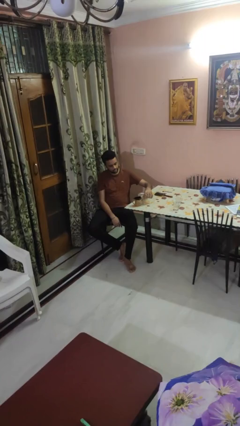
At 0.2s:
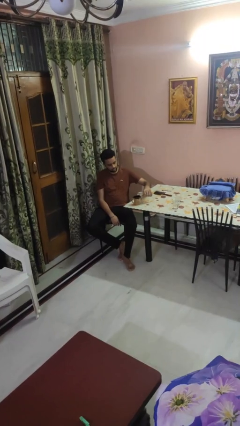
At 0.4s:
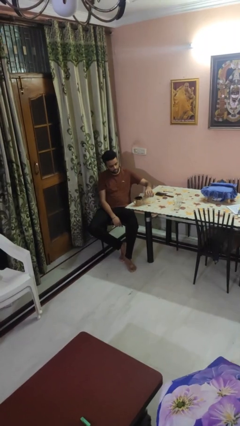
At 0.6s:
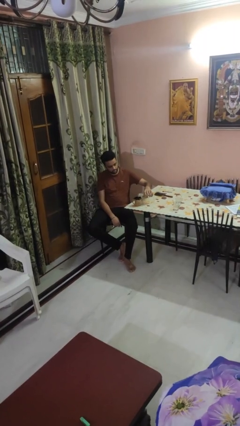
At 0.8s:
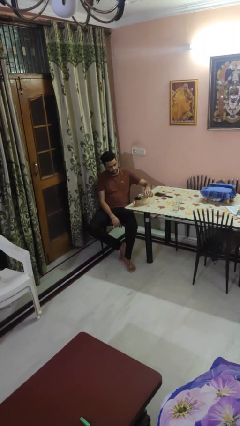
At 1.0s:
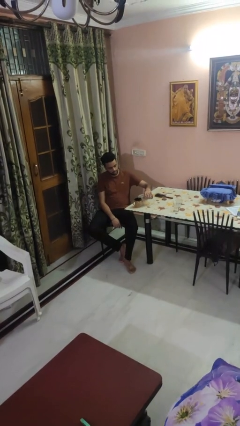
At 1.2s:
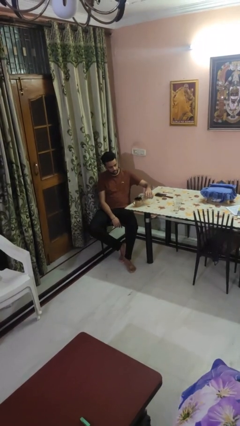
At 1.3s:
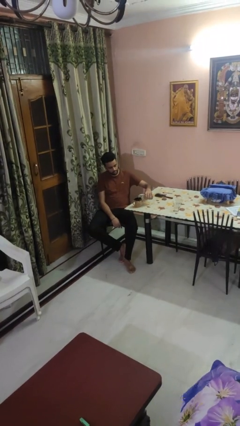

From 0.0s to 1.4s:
person pours liquid into cup

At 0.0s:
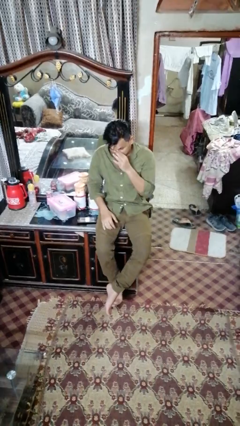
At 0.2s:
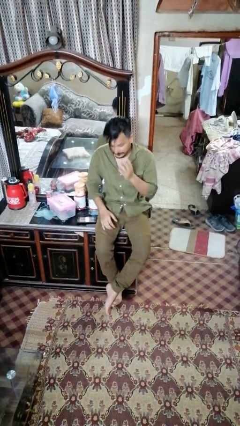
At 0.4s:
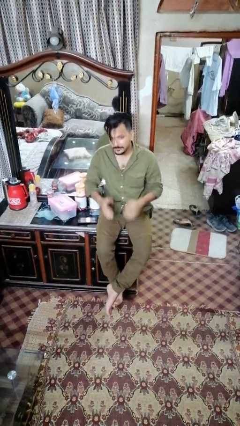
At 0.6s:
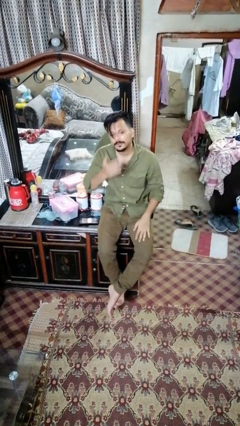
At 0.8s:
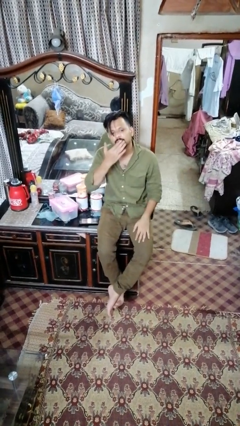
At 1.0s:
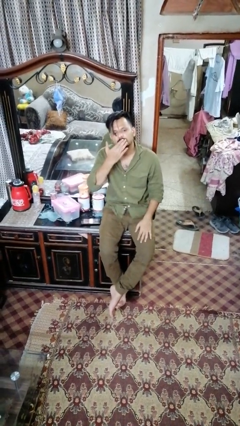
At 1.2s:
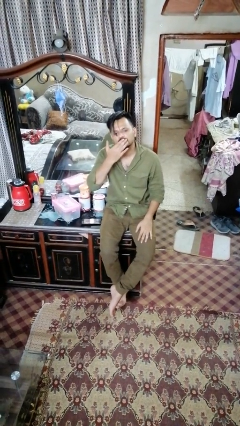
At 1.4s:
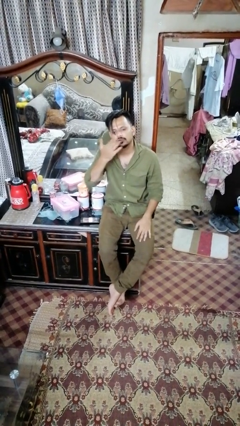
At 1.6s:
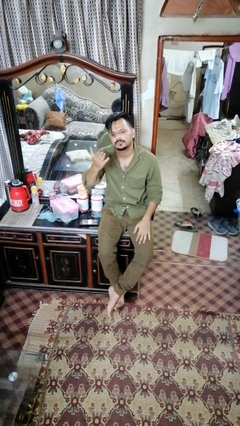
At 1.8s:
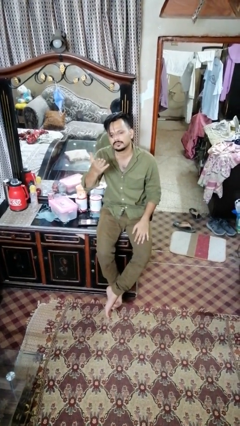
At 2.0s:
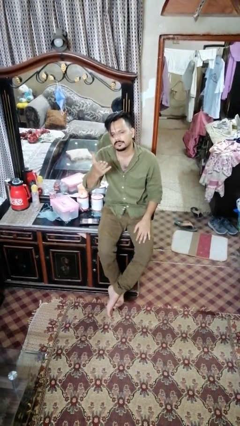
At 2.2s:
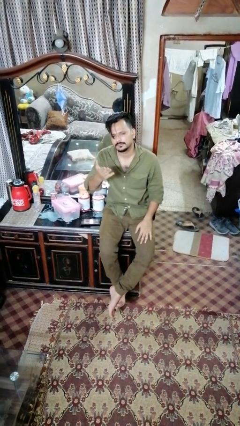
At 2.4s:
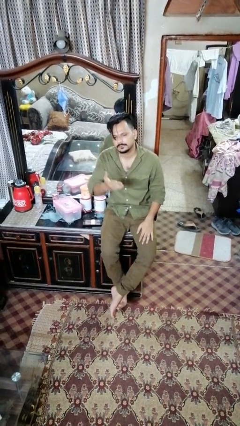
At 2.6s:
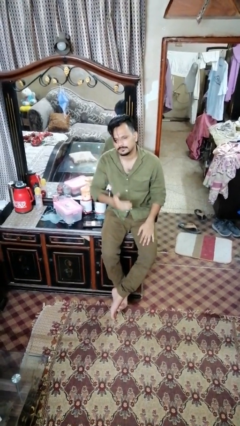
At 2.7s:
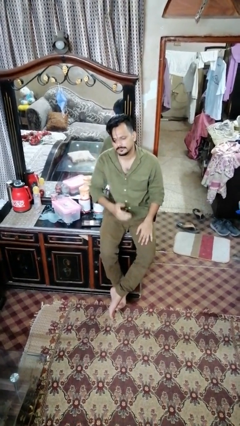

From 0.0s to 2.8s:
person gestures blow kiss

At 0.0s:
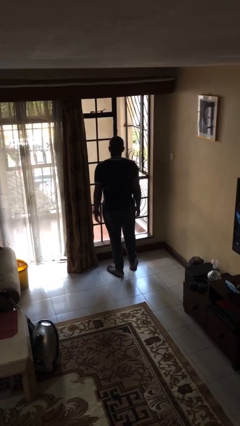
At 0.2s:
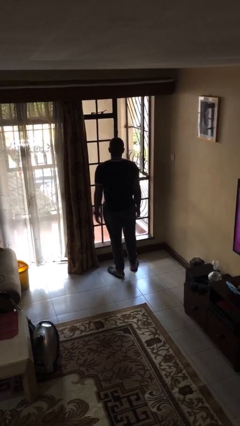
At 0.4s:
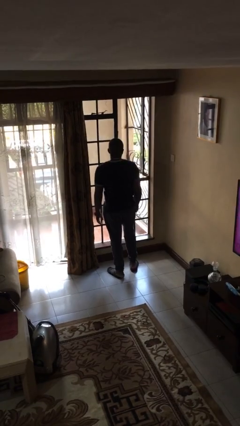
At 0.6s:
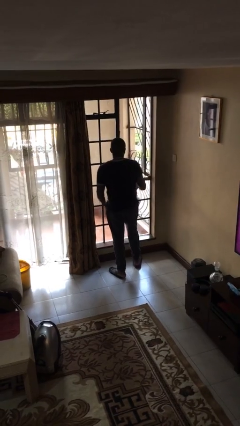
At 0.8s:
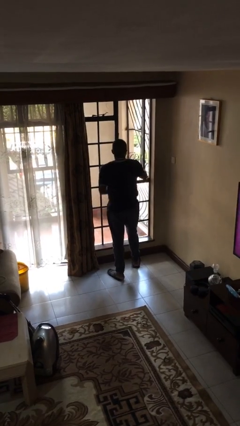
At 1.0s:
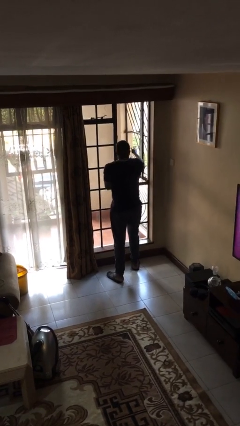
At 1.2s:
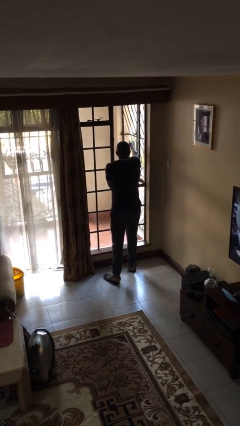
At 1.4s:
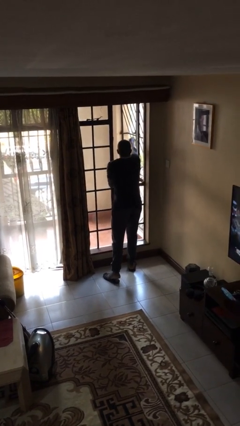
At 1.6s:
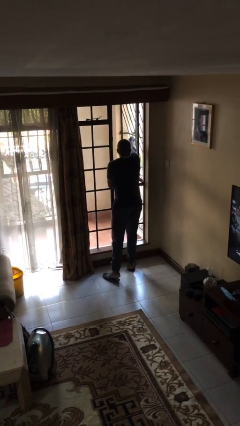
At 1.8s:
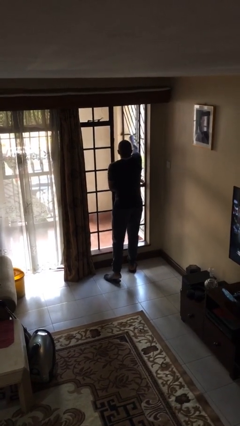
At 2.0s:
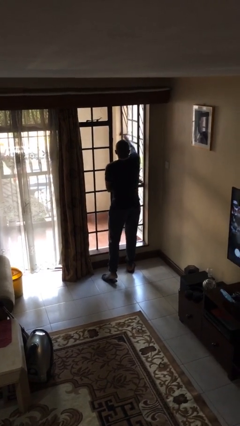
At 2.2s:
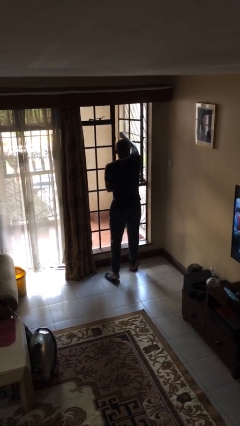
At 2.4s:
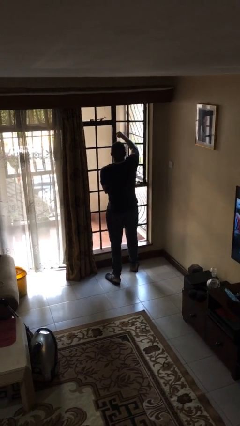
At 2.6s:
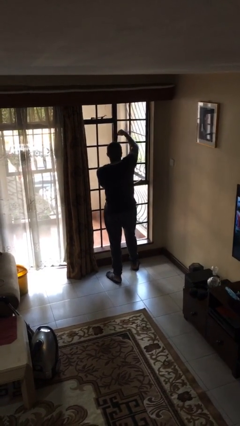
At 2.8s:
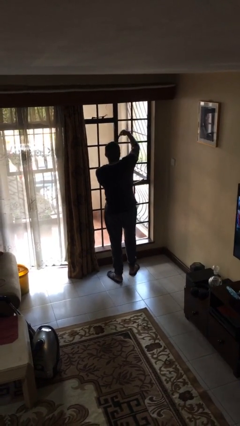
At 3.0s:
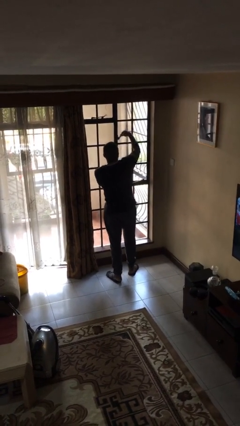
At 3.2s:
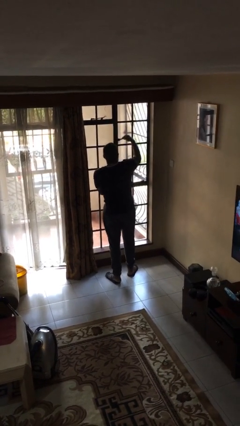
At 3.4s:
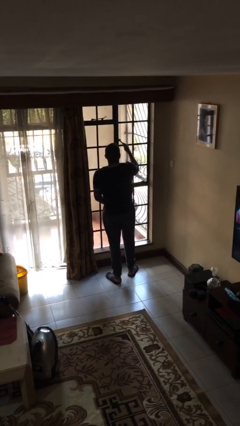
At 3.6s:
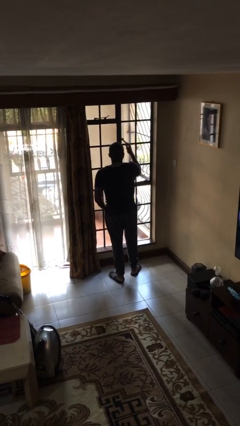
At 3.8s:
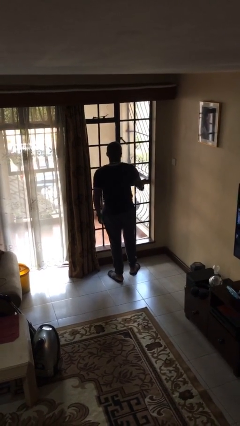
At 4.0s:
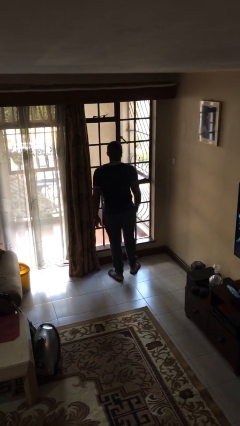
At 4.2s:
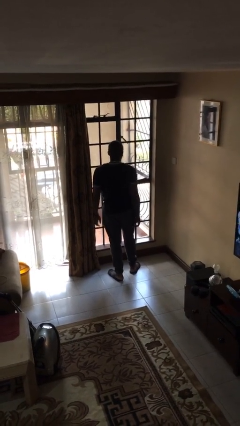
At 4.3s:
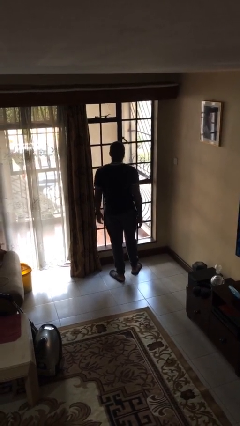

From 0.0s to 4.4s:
person closes home window

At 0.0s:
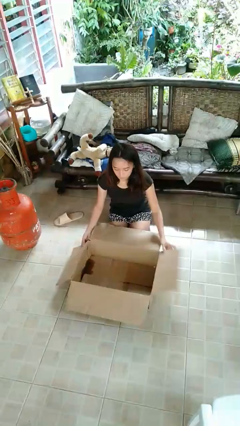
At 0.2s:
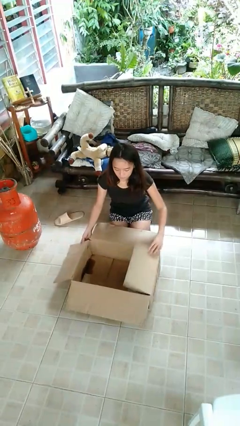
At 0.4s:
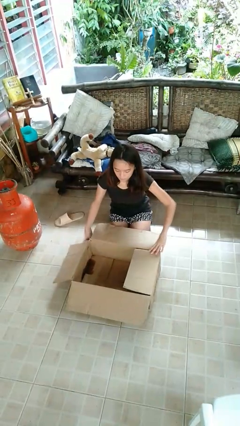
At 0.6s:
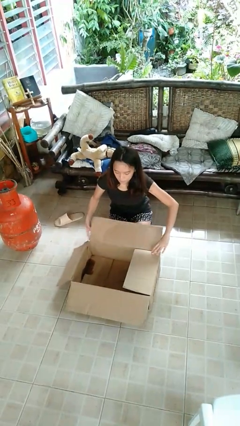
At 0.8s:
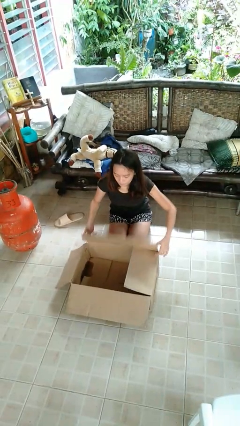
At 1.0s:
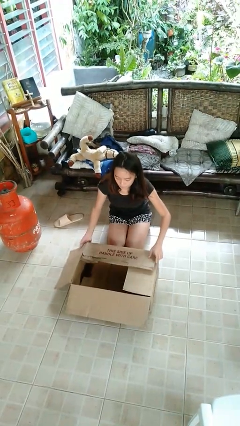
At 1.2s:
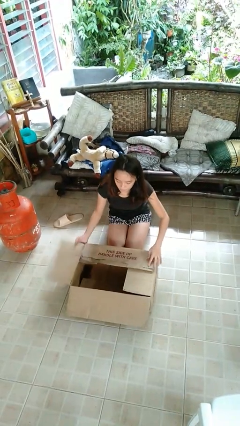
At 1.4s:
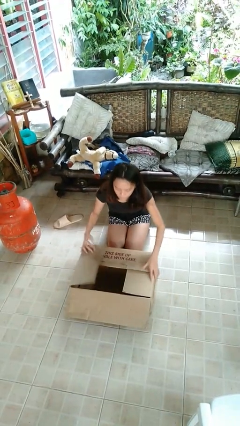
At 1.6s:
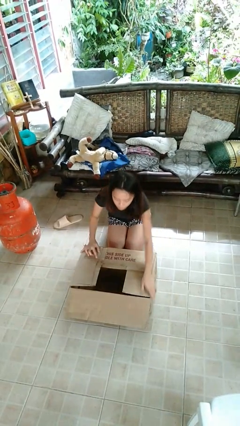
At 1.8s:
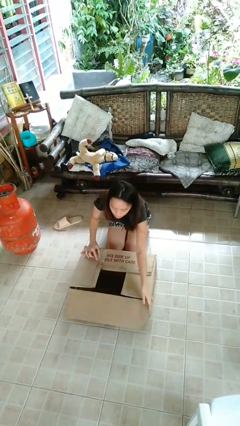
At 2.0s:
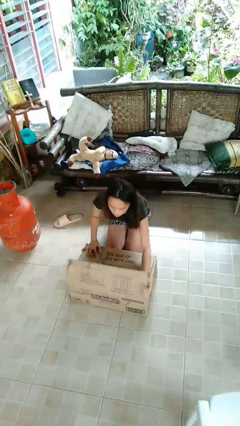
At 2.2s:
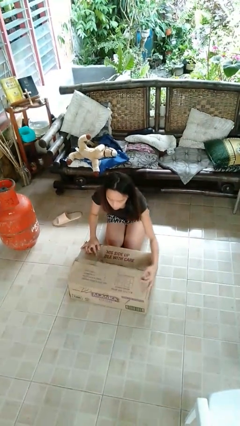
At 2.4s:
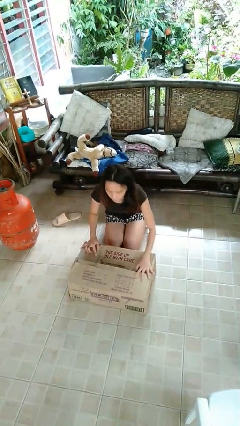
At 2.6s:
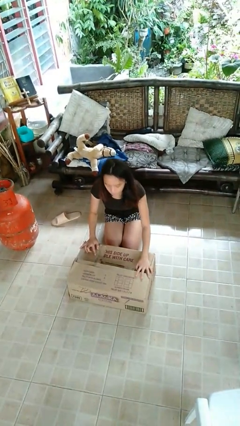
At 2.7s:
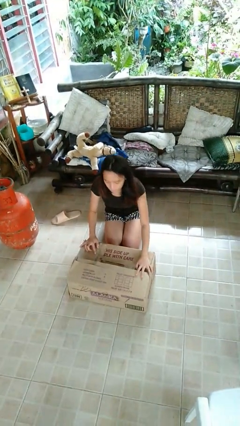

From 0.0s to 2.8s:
person closes box

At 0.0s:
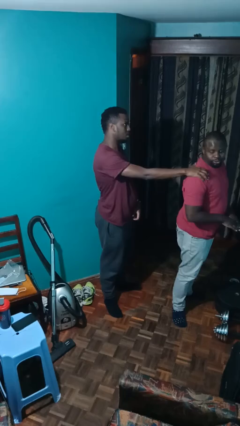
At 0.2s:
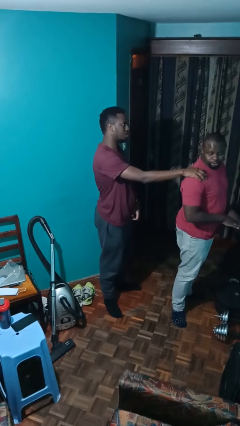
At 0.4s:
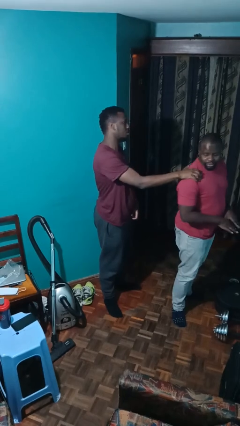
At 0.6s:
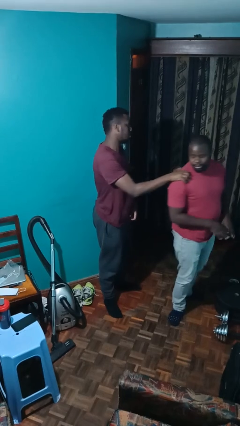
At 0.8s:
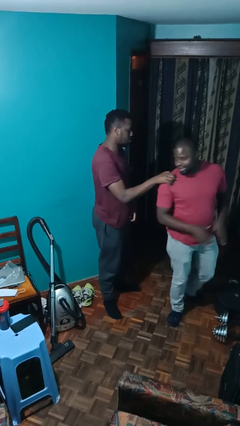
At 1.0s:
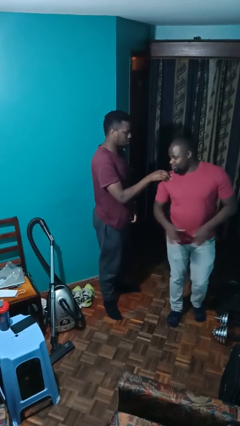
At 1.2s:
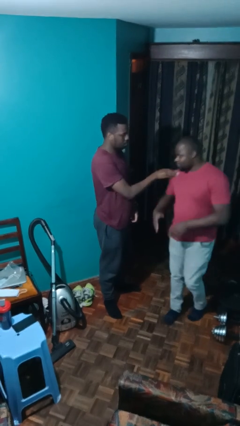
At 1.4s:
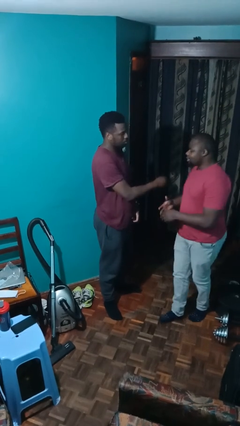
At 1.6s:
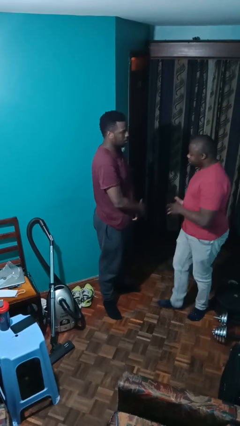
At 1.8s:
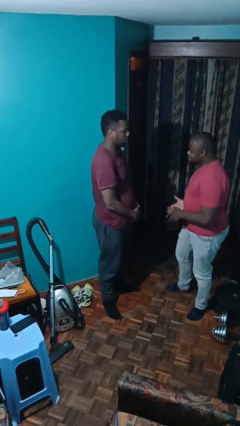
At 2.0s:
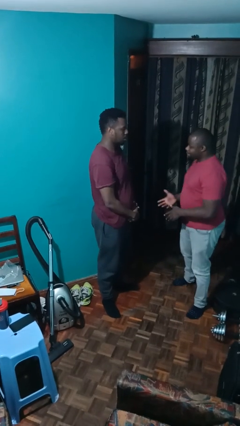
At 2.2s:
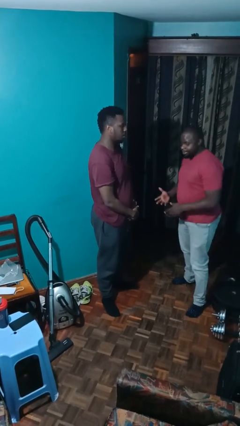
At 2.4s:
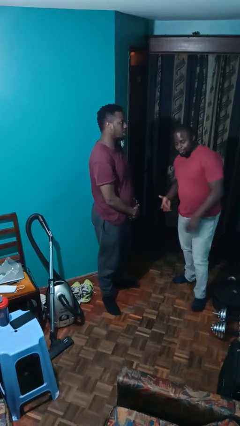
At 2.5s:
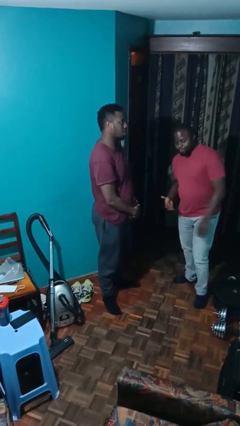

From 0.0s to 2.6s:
person spins person around

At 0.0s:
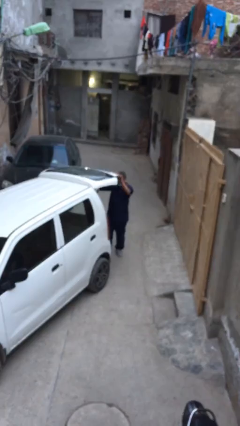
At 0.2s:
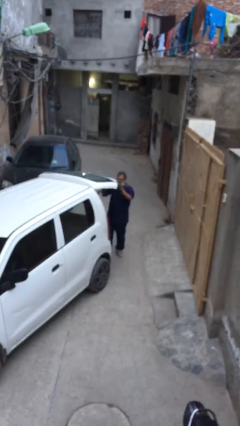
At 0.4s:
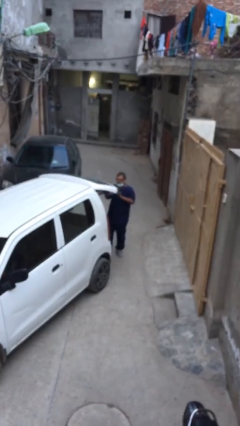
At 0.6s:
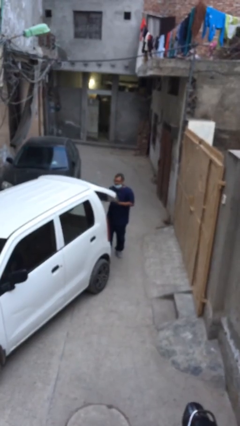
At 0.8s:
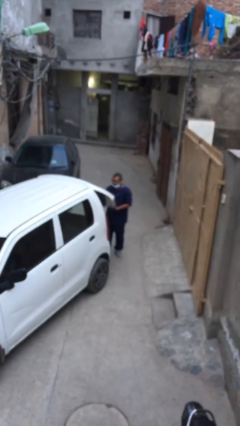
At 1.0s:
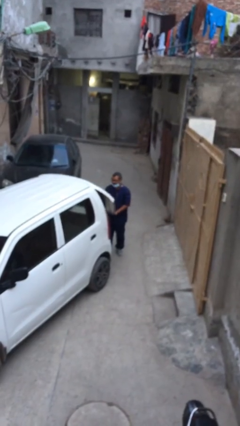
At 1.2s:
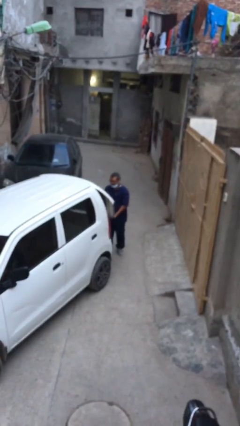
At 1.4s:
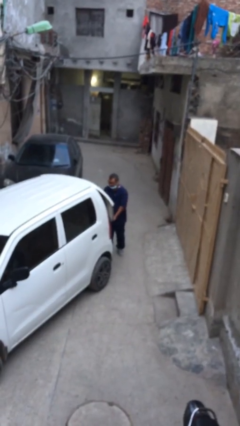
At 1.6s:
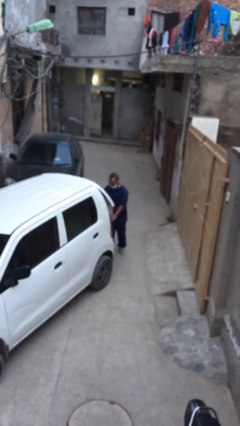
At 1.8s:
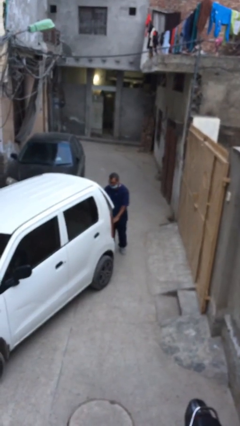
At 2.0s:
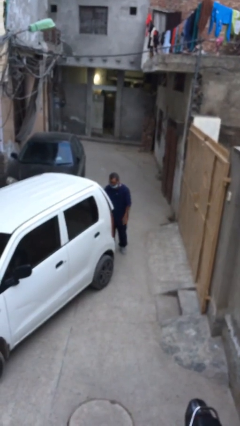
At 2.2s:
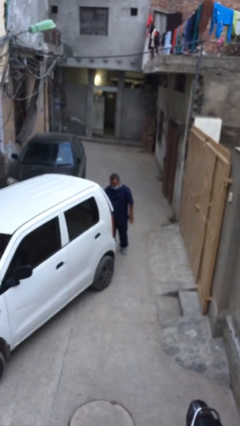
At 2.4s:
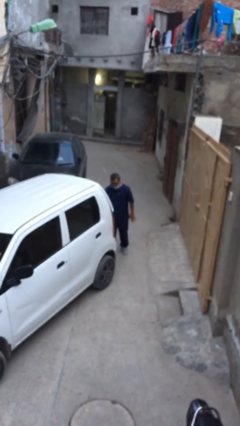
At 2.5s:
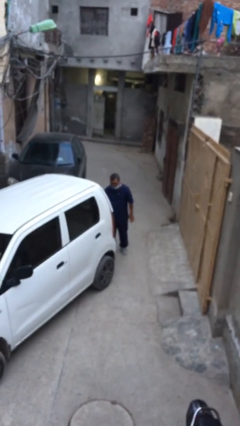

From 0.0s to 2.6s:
person closes car trunk

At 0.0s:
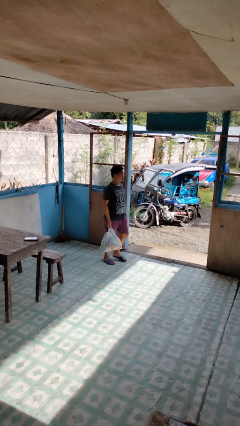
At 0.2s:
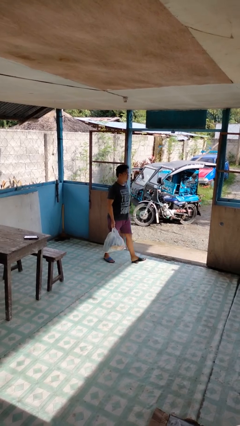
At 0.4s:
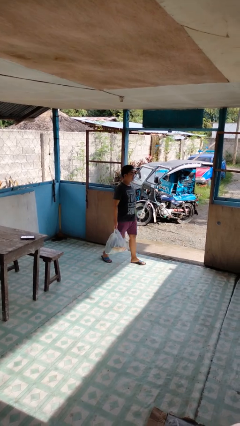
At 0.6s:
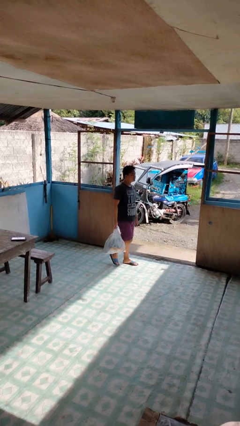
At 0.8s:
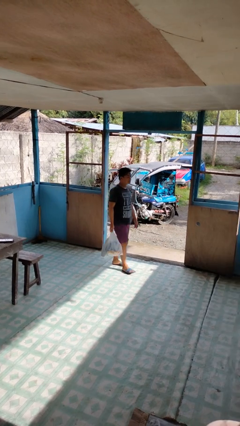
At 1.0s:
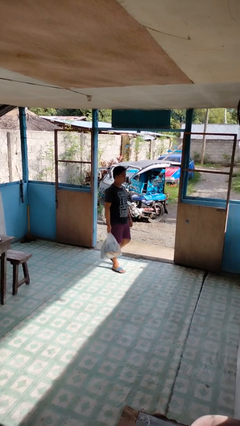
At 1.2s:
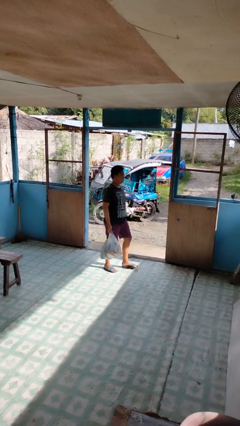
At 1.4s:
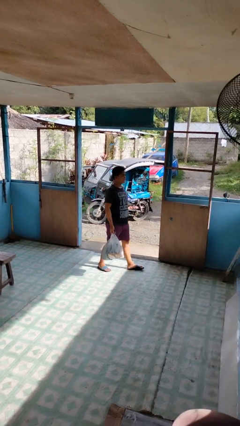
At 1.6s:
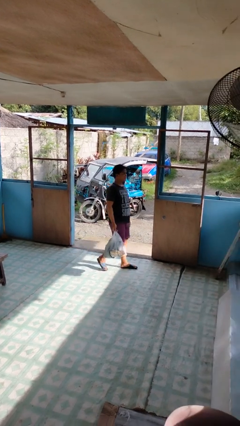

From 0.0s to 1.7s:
person carries groceries
